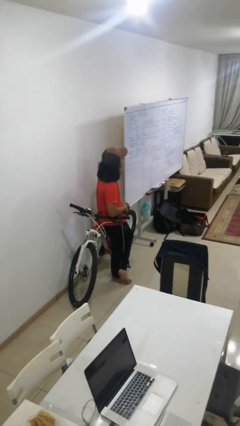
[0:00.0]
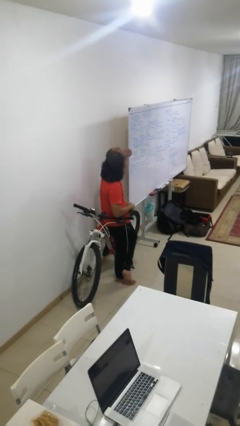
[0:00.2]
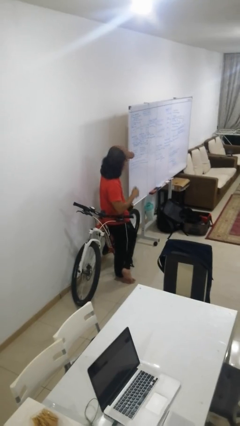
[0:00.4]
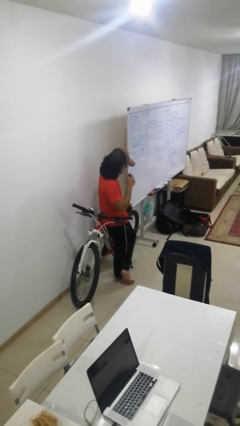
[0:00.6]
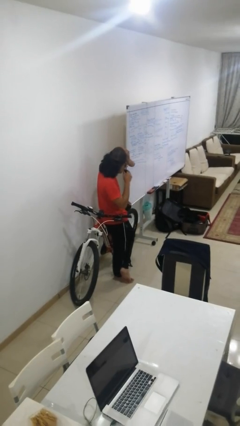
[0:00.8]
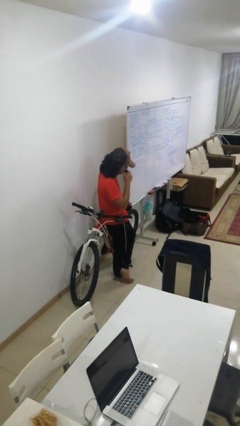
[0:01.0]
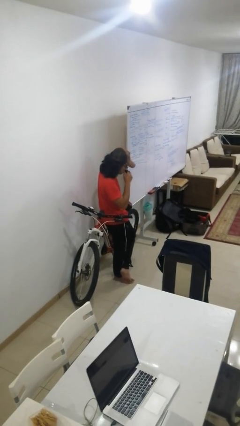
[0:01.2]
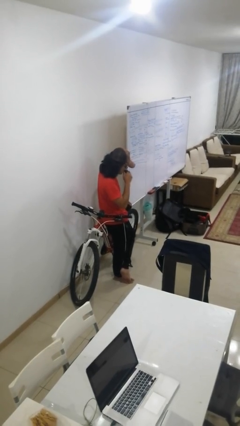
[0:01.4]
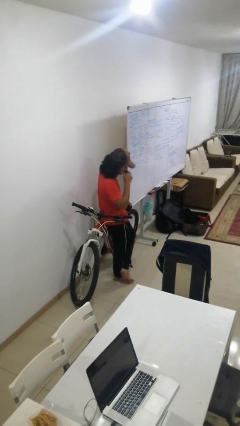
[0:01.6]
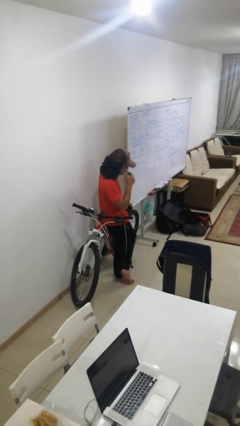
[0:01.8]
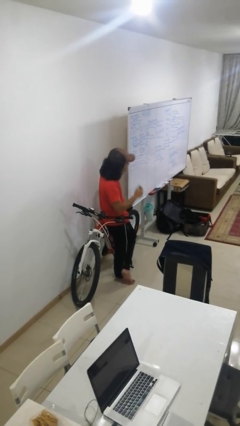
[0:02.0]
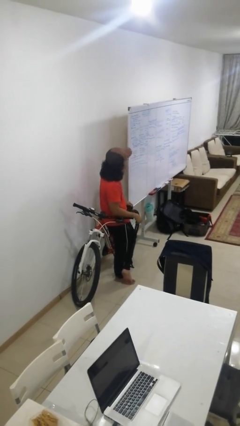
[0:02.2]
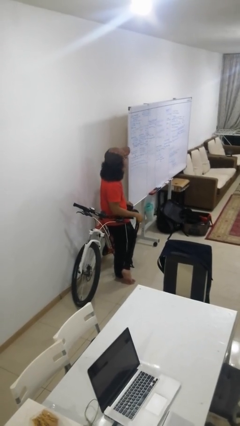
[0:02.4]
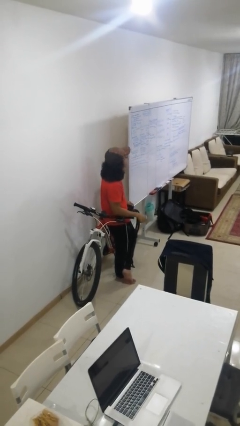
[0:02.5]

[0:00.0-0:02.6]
person vapes

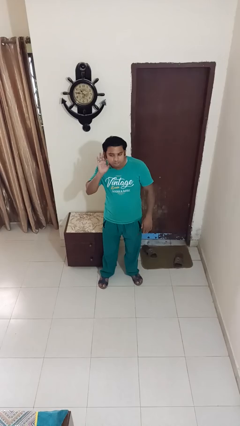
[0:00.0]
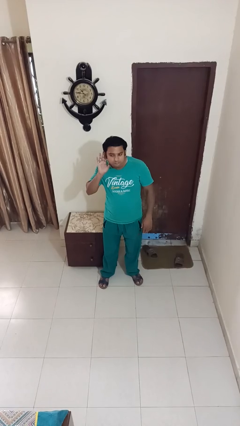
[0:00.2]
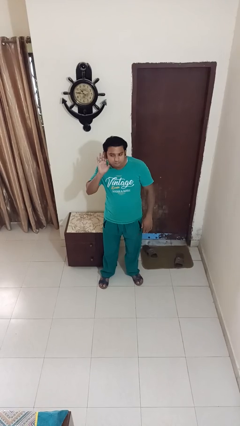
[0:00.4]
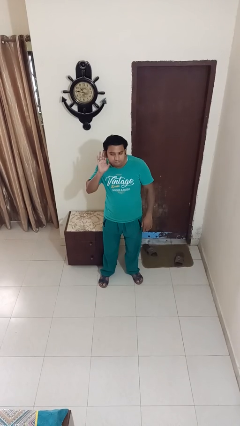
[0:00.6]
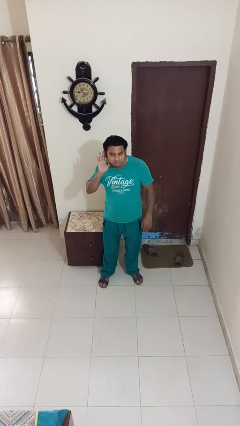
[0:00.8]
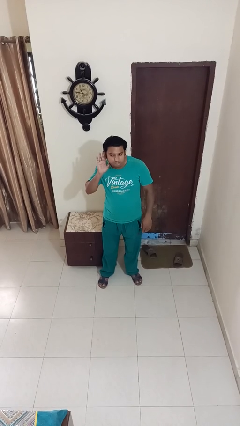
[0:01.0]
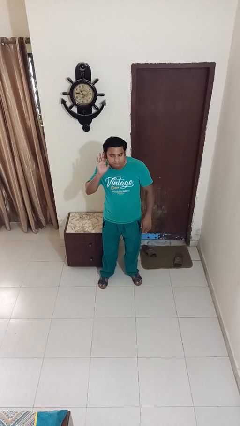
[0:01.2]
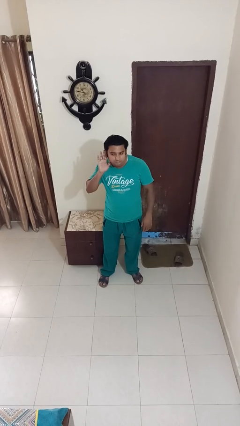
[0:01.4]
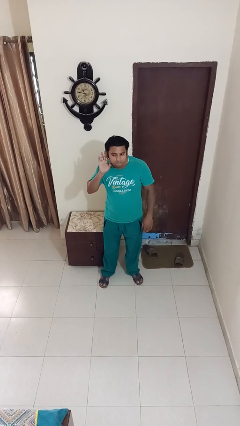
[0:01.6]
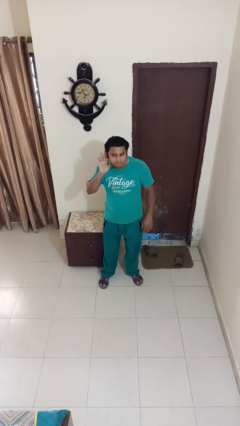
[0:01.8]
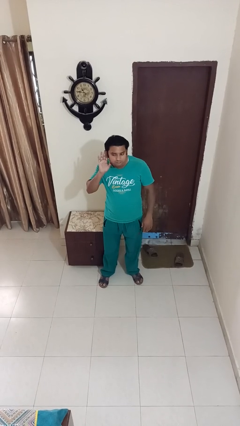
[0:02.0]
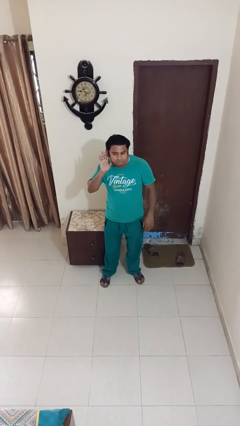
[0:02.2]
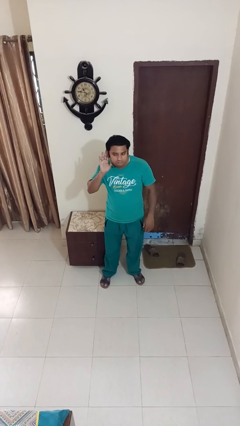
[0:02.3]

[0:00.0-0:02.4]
person gestures listen closely

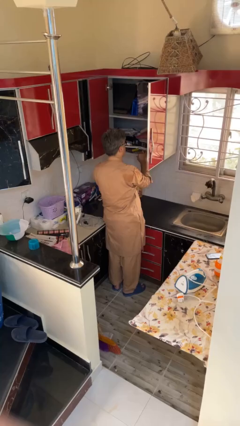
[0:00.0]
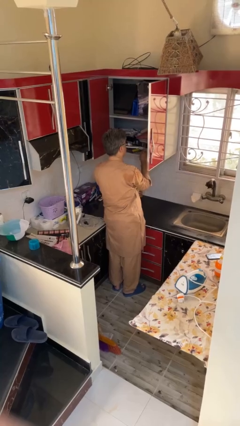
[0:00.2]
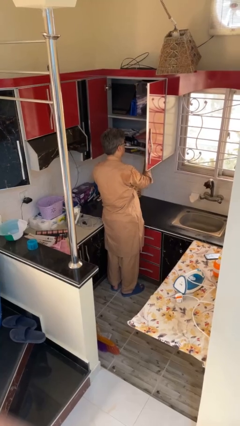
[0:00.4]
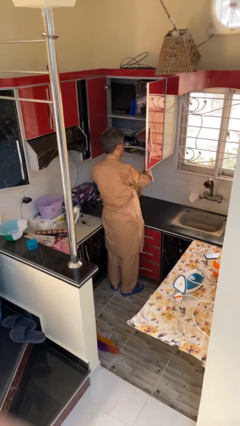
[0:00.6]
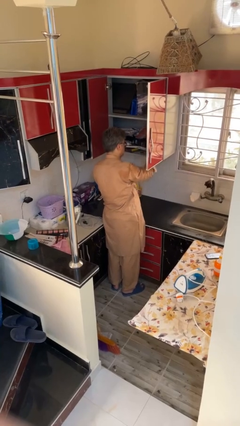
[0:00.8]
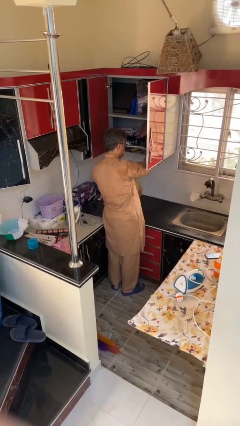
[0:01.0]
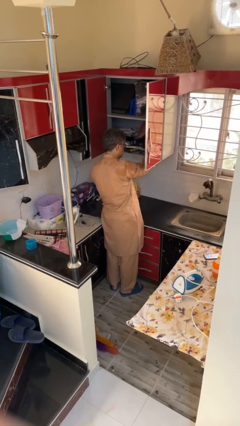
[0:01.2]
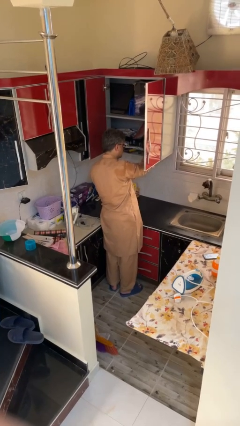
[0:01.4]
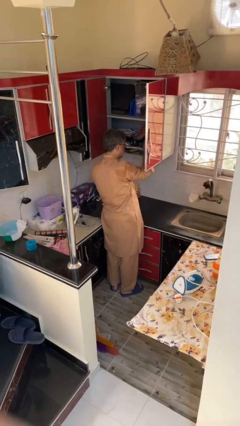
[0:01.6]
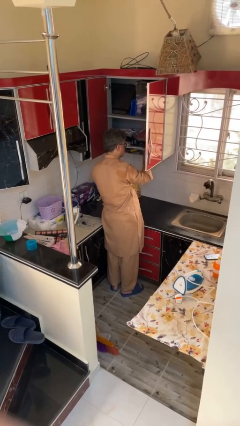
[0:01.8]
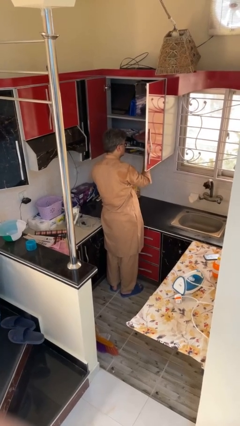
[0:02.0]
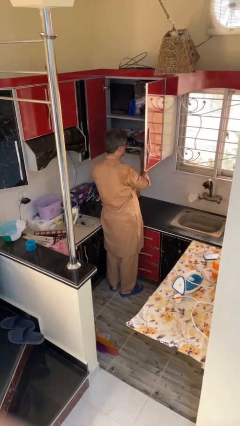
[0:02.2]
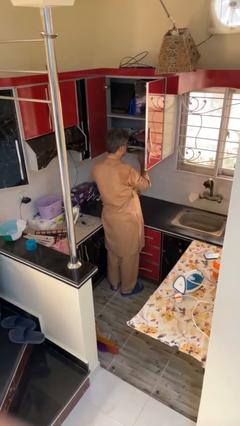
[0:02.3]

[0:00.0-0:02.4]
person searches in cabinet

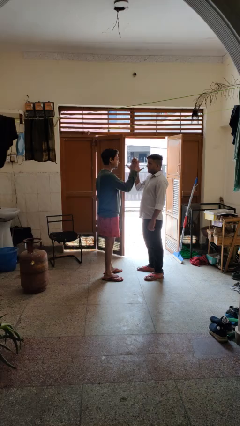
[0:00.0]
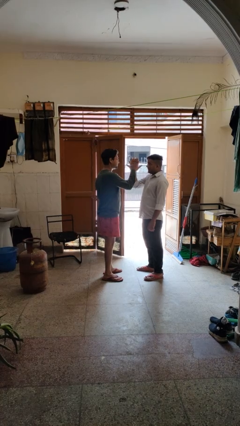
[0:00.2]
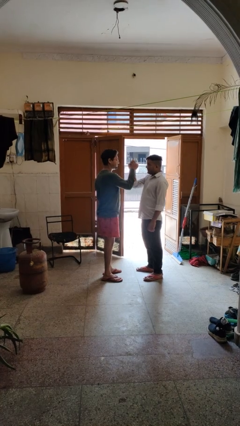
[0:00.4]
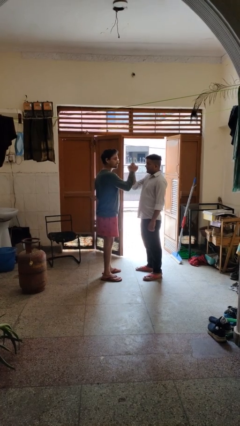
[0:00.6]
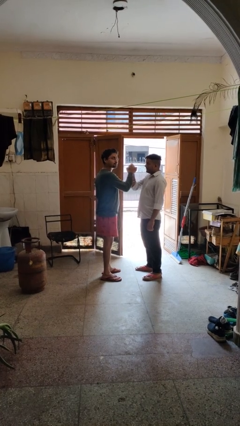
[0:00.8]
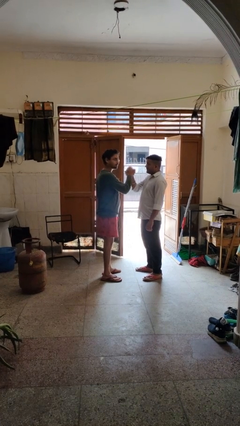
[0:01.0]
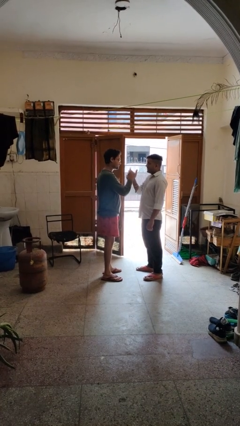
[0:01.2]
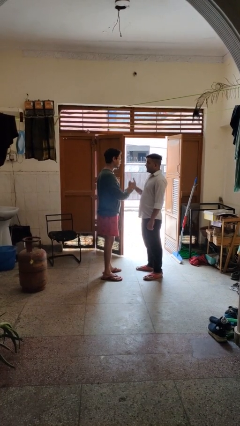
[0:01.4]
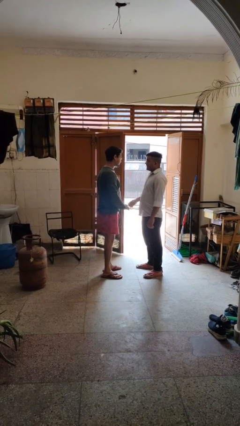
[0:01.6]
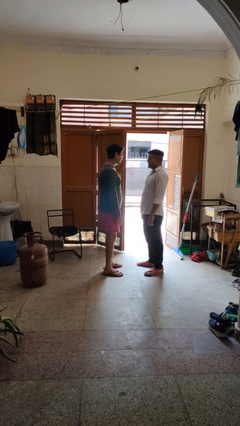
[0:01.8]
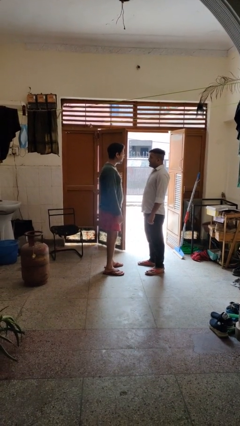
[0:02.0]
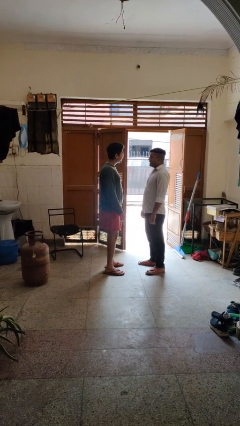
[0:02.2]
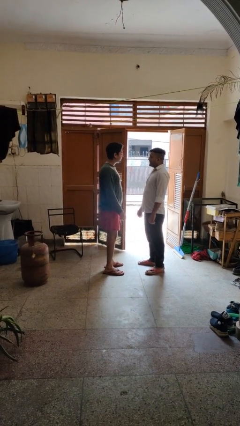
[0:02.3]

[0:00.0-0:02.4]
person highfives hand

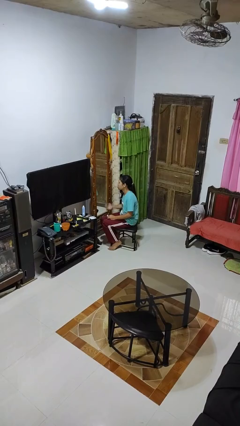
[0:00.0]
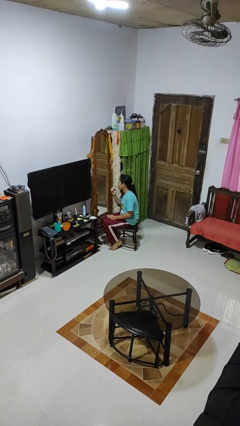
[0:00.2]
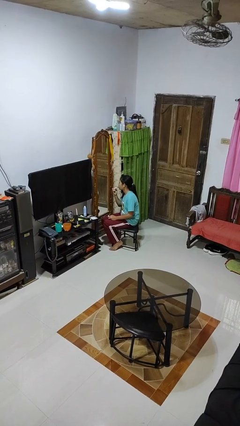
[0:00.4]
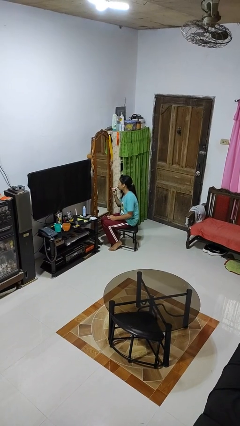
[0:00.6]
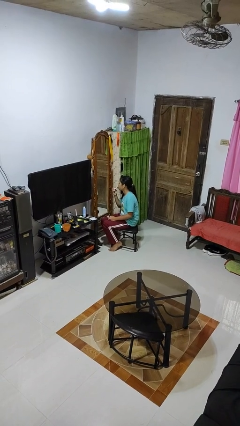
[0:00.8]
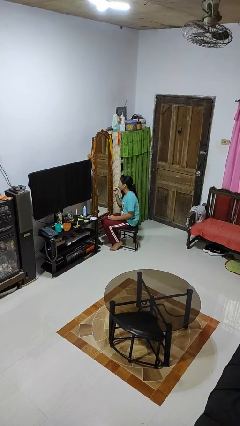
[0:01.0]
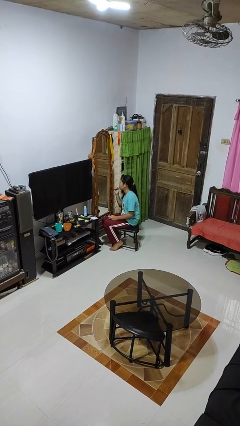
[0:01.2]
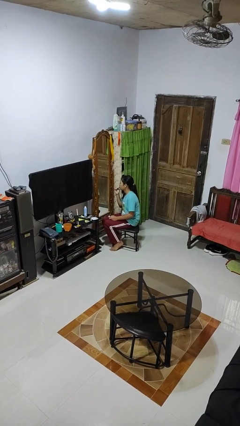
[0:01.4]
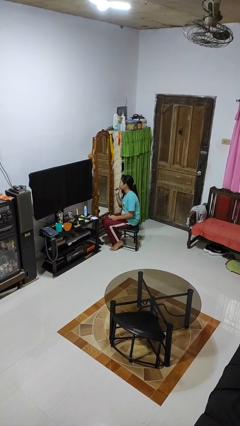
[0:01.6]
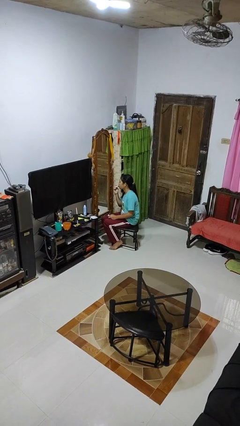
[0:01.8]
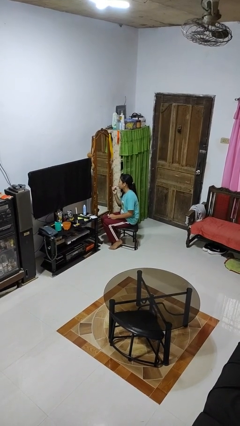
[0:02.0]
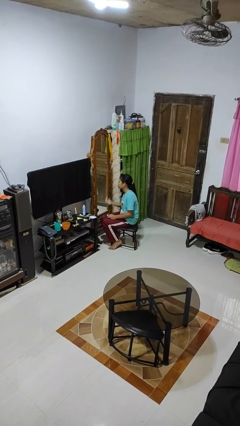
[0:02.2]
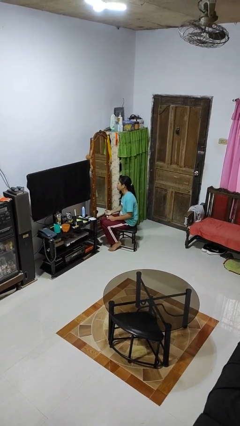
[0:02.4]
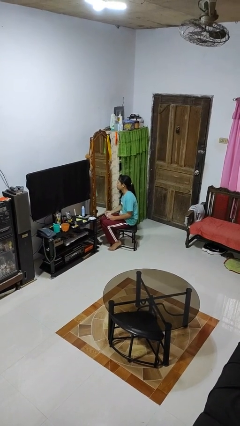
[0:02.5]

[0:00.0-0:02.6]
person applies lip makeup

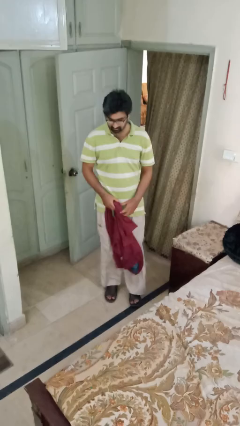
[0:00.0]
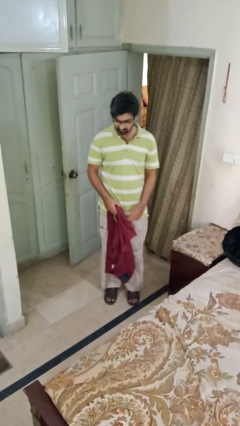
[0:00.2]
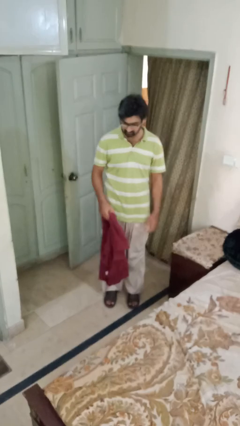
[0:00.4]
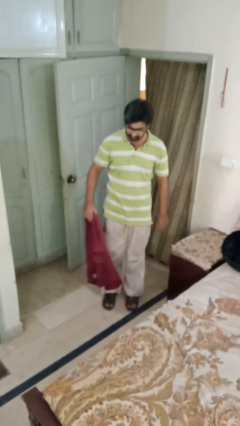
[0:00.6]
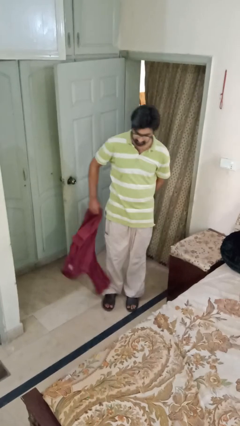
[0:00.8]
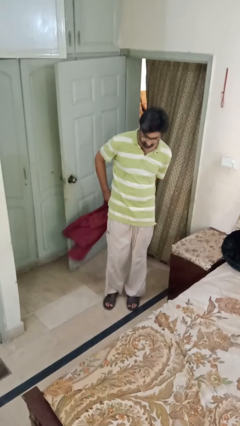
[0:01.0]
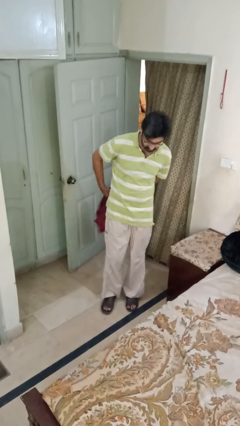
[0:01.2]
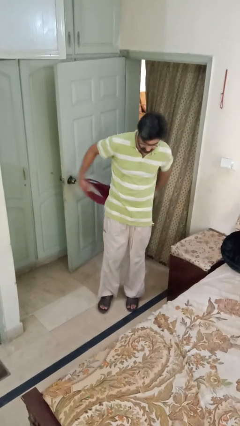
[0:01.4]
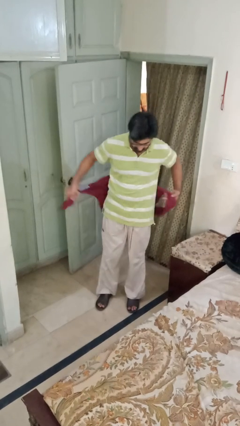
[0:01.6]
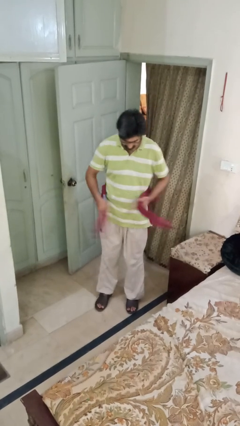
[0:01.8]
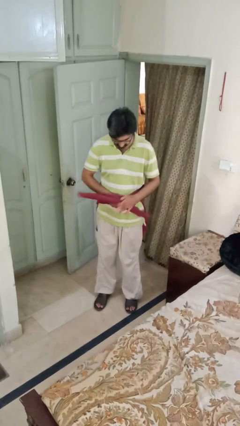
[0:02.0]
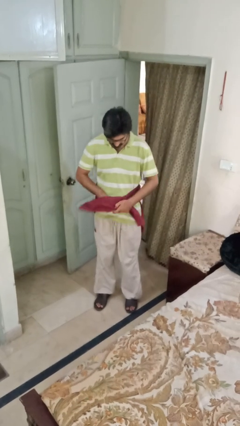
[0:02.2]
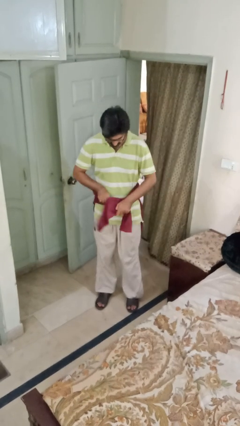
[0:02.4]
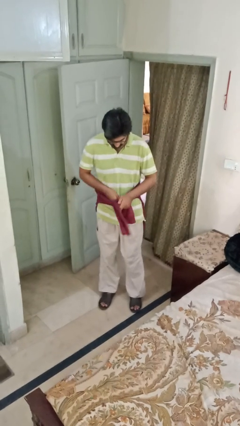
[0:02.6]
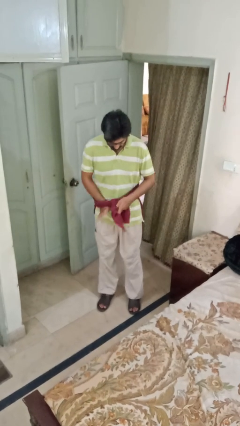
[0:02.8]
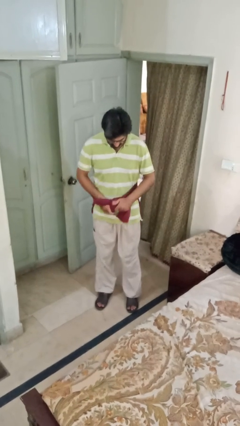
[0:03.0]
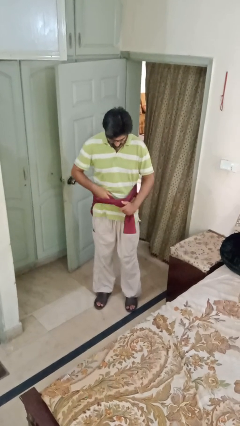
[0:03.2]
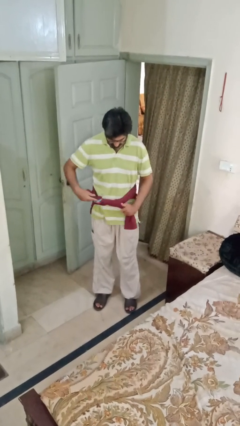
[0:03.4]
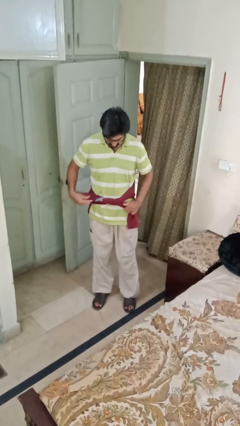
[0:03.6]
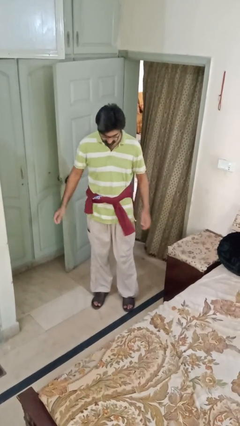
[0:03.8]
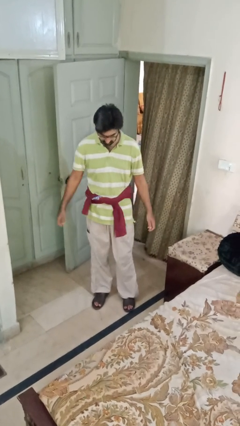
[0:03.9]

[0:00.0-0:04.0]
person ties jacket around waist

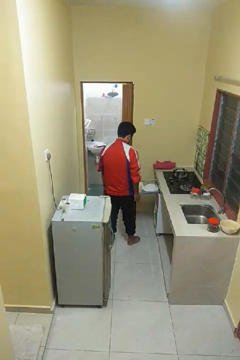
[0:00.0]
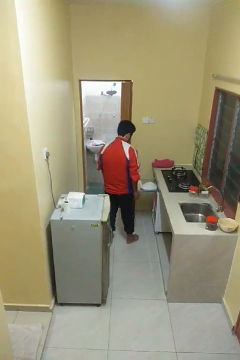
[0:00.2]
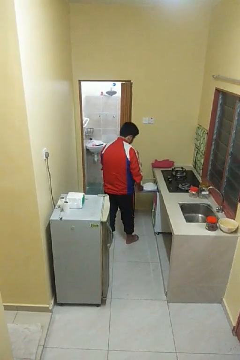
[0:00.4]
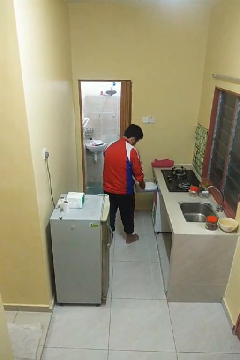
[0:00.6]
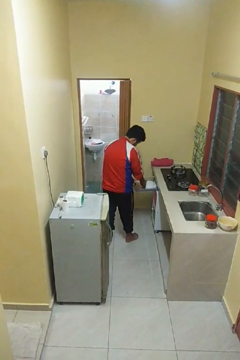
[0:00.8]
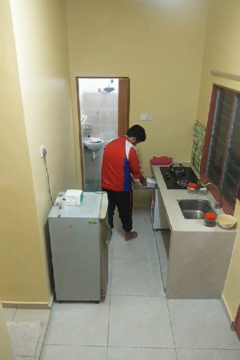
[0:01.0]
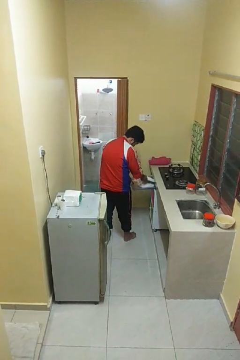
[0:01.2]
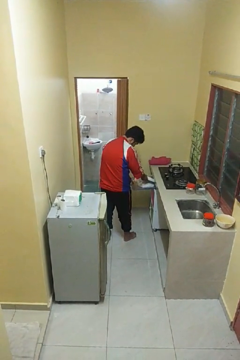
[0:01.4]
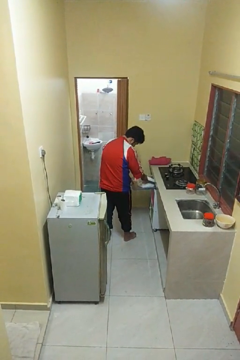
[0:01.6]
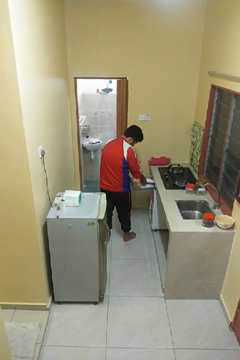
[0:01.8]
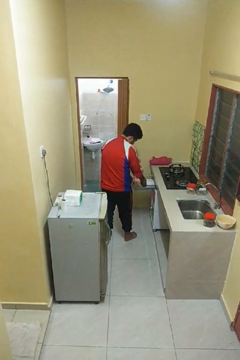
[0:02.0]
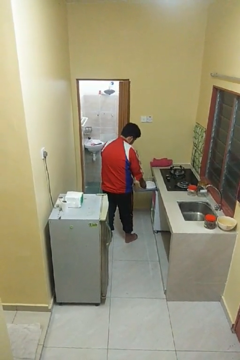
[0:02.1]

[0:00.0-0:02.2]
person searches in kitchen drawer
